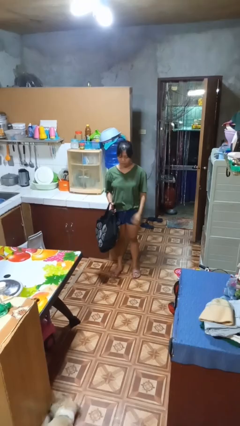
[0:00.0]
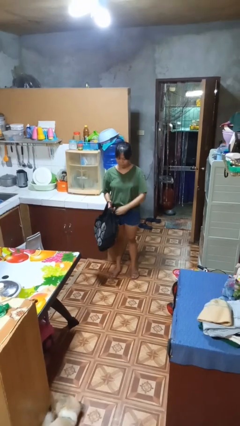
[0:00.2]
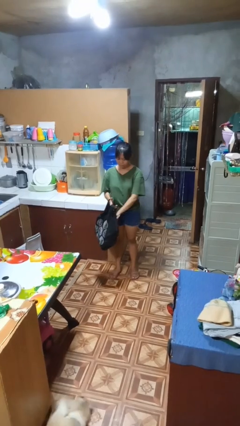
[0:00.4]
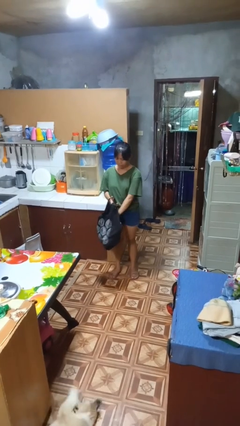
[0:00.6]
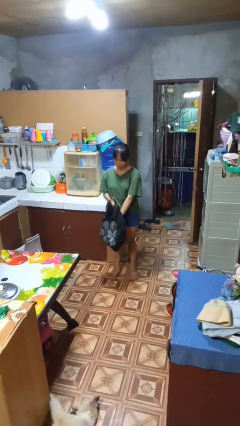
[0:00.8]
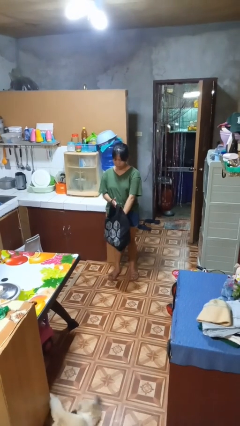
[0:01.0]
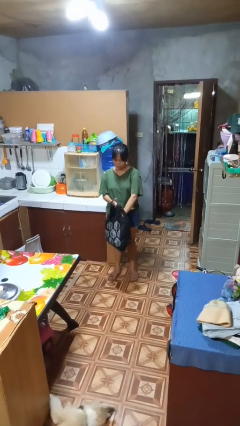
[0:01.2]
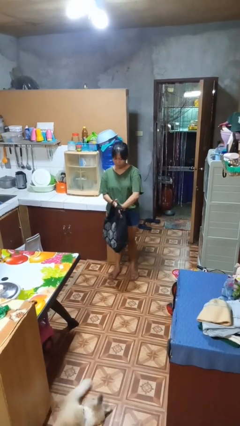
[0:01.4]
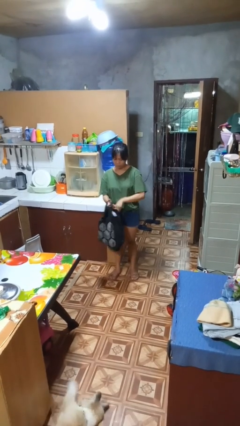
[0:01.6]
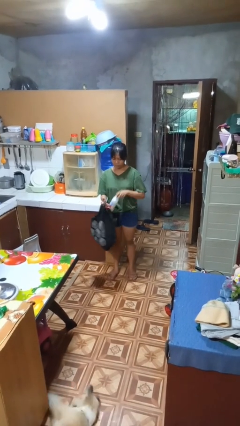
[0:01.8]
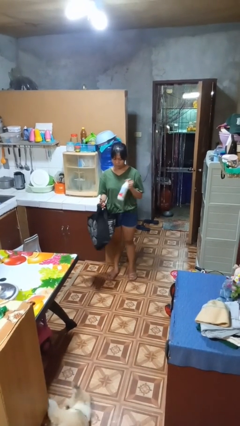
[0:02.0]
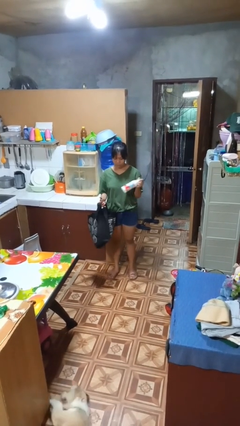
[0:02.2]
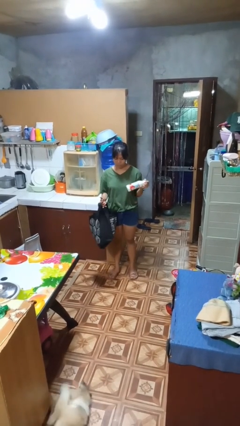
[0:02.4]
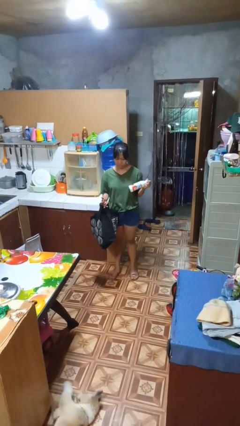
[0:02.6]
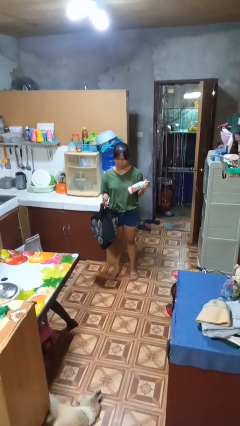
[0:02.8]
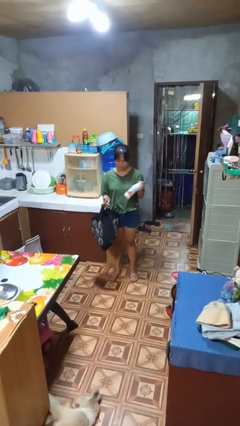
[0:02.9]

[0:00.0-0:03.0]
person takes object from bag

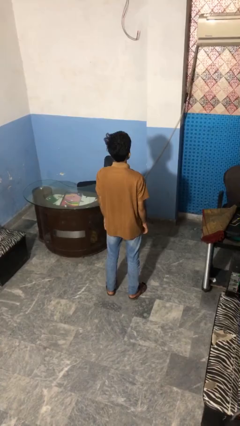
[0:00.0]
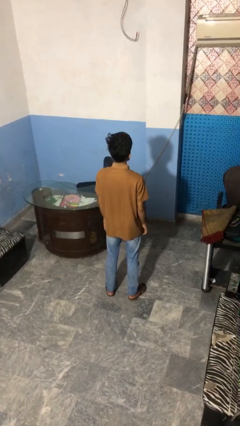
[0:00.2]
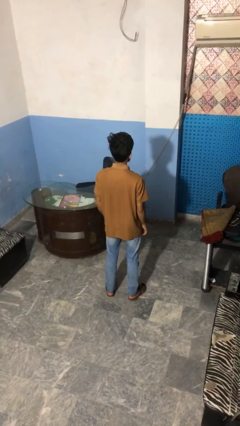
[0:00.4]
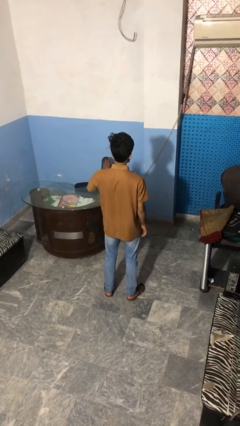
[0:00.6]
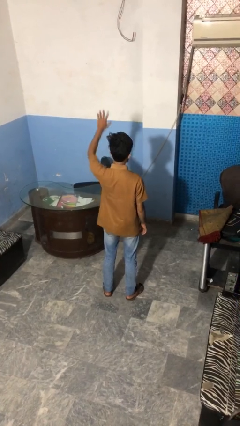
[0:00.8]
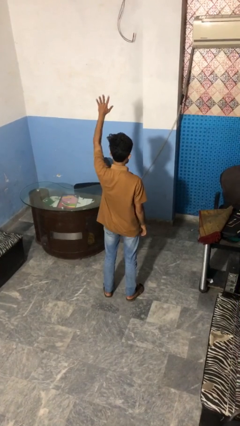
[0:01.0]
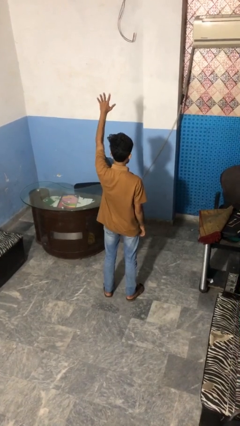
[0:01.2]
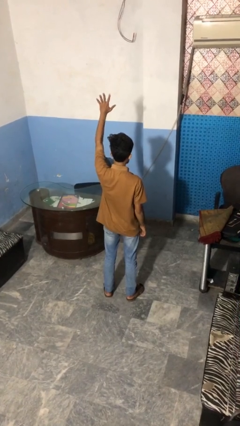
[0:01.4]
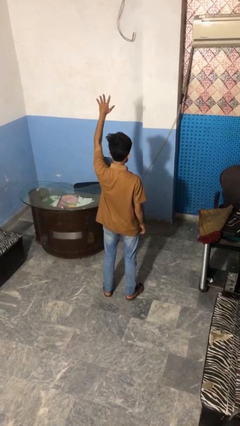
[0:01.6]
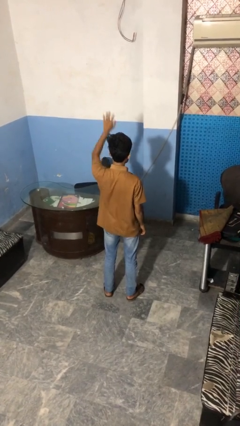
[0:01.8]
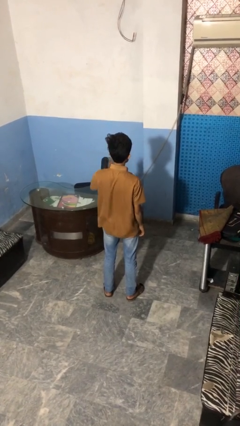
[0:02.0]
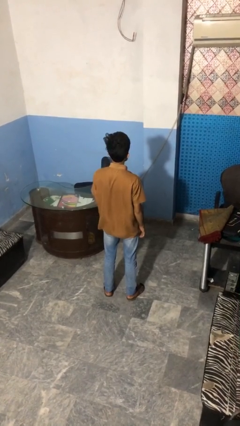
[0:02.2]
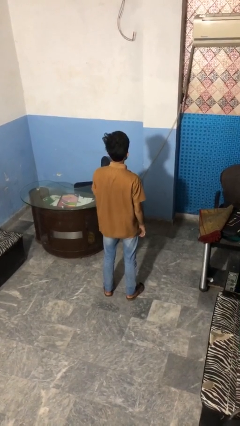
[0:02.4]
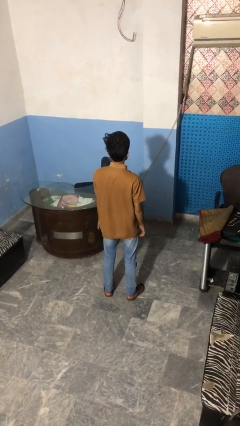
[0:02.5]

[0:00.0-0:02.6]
person gestures number five

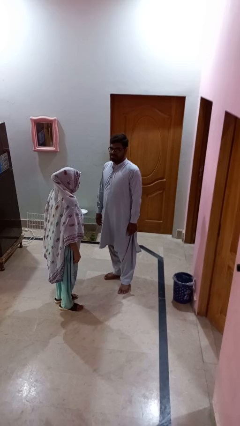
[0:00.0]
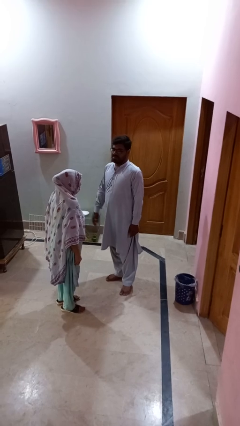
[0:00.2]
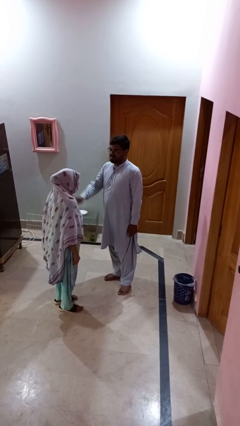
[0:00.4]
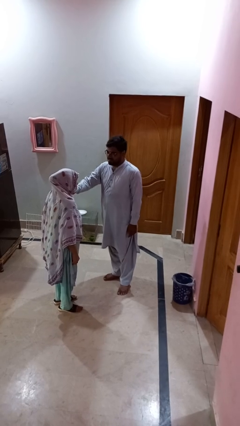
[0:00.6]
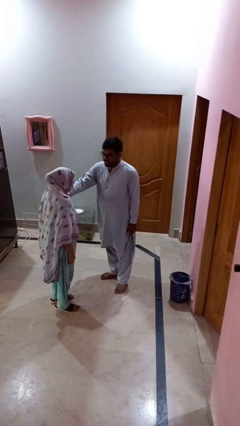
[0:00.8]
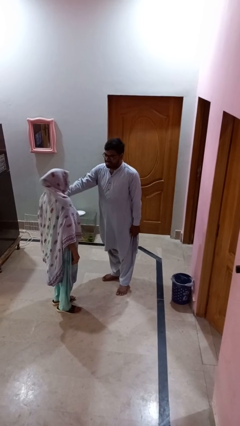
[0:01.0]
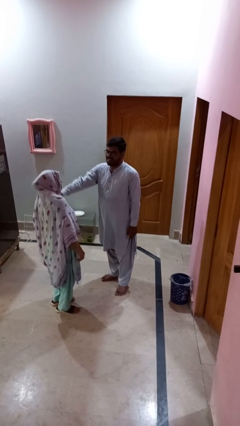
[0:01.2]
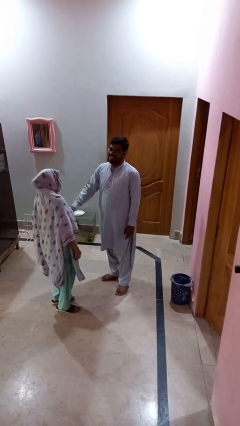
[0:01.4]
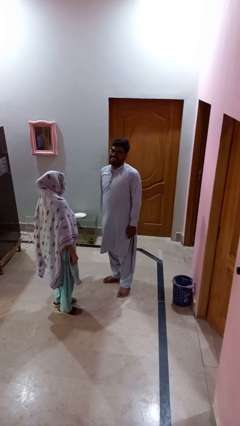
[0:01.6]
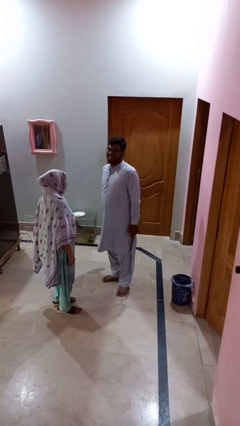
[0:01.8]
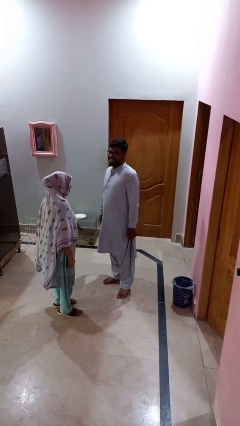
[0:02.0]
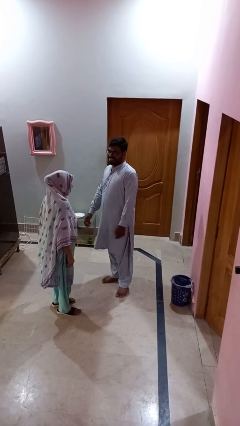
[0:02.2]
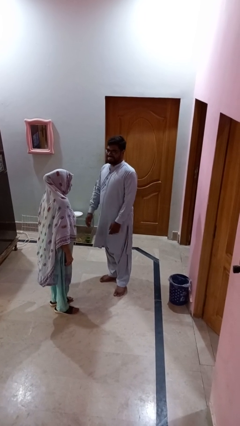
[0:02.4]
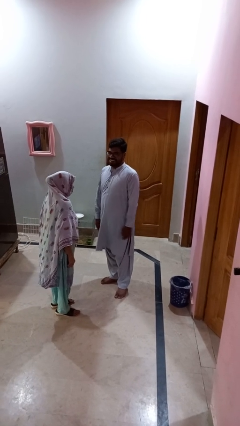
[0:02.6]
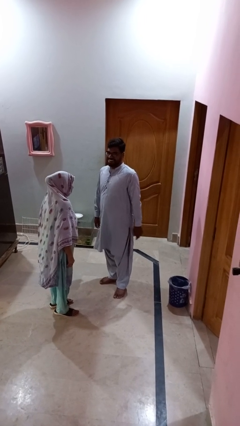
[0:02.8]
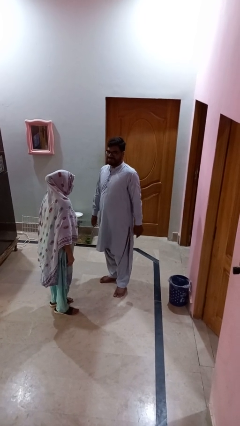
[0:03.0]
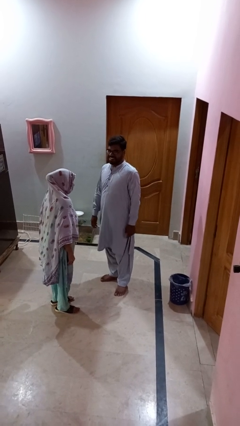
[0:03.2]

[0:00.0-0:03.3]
person shoves person

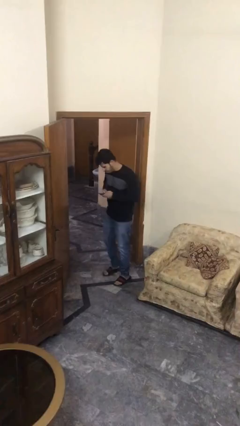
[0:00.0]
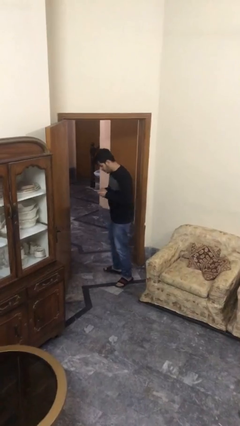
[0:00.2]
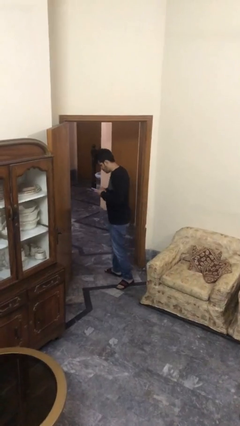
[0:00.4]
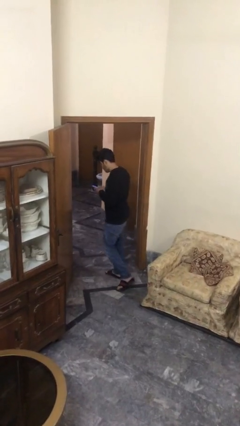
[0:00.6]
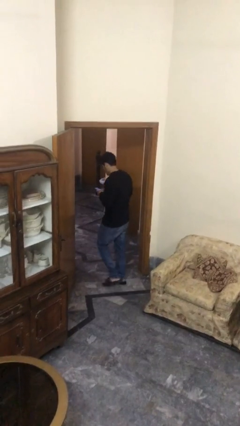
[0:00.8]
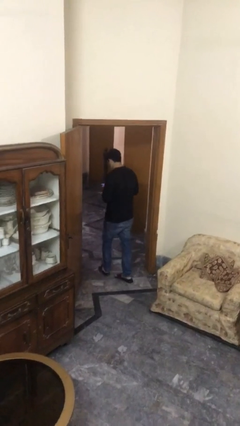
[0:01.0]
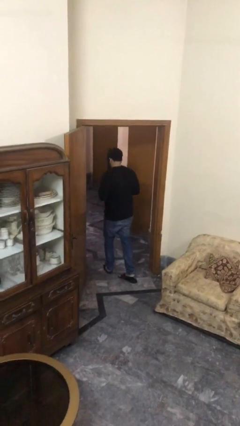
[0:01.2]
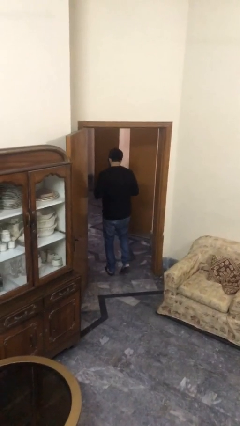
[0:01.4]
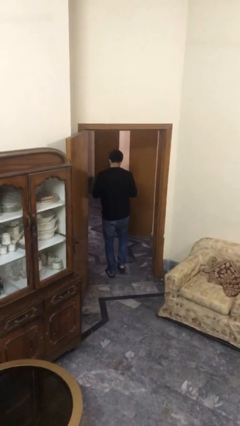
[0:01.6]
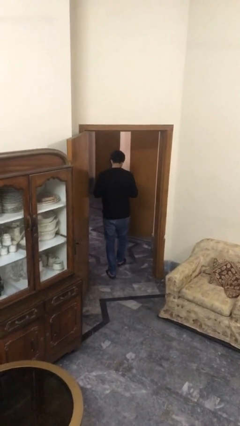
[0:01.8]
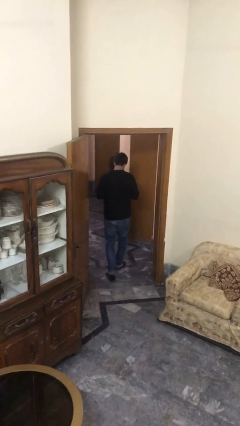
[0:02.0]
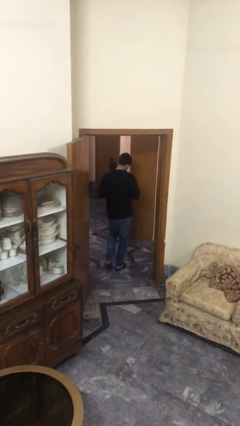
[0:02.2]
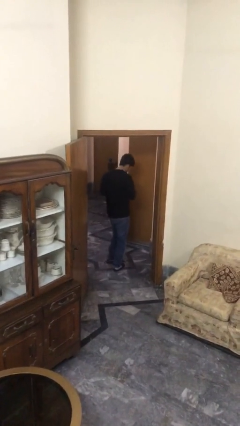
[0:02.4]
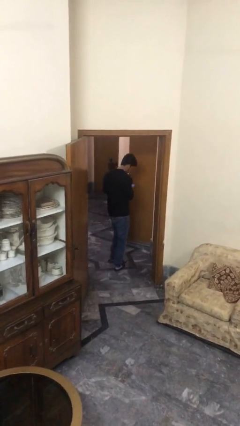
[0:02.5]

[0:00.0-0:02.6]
person exits scene through structure

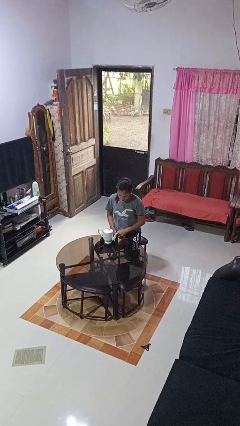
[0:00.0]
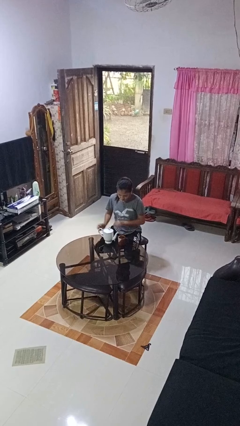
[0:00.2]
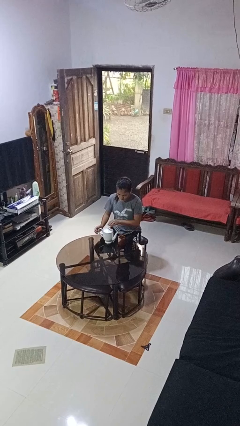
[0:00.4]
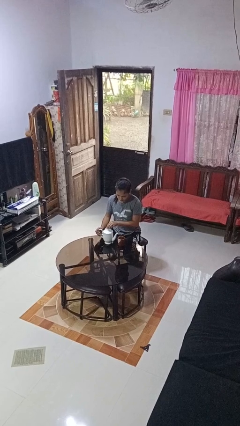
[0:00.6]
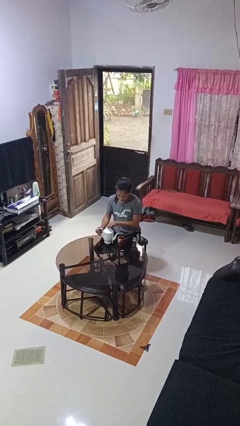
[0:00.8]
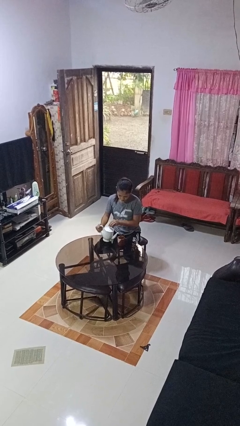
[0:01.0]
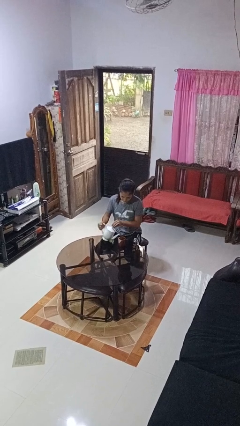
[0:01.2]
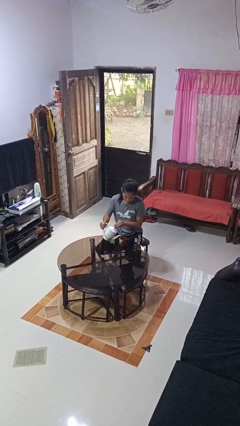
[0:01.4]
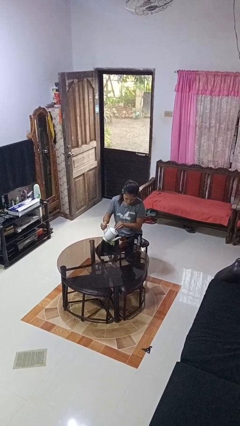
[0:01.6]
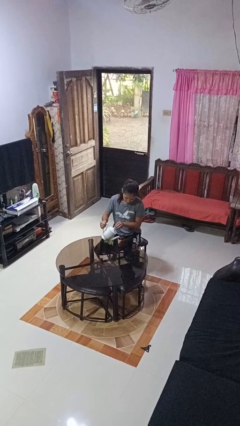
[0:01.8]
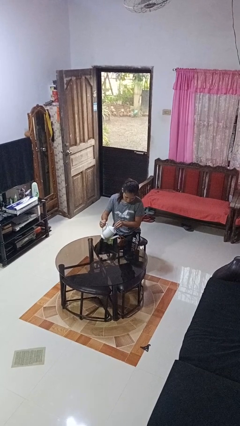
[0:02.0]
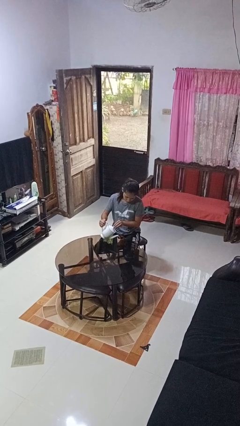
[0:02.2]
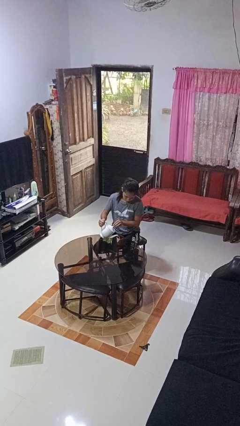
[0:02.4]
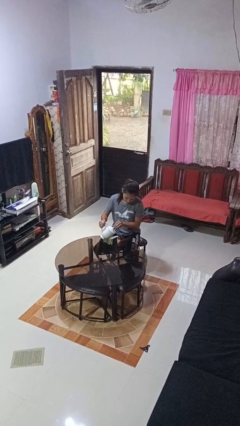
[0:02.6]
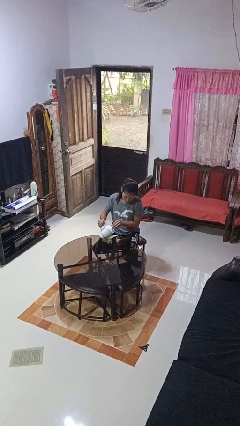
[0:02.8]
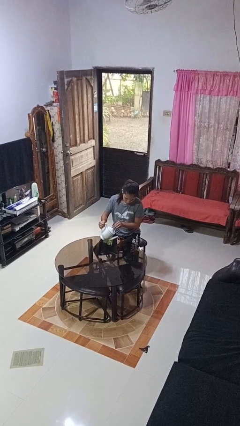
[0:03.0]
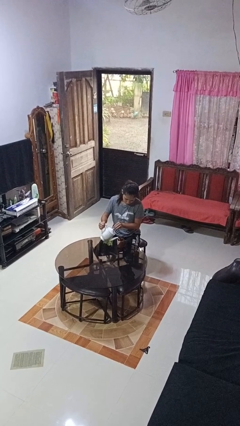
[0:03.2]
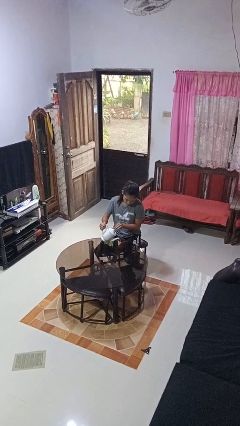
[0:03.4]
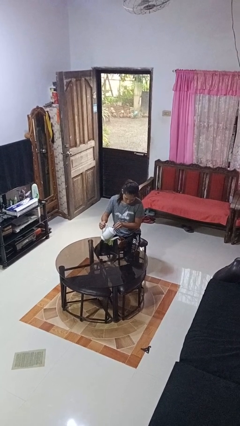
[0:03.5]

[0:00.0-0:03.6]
person pours coffee into mug

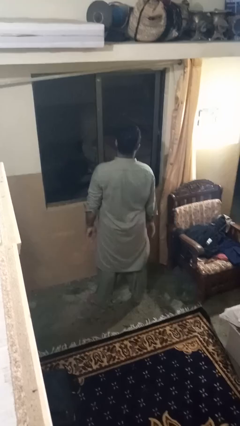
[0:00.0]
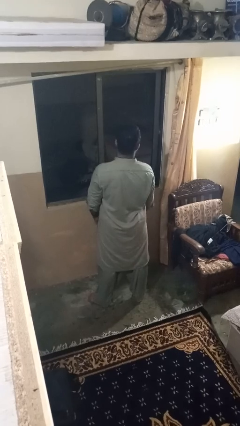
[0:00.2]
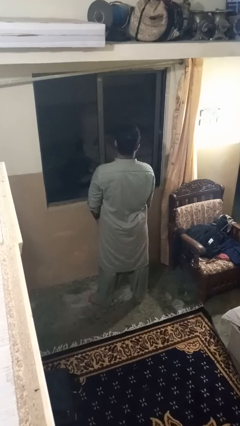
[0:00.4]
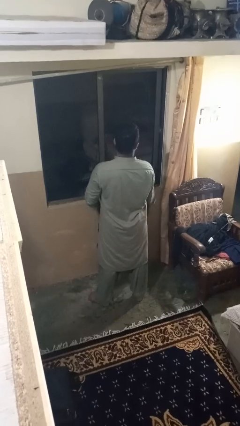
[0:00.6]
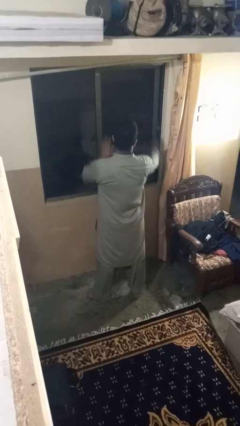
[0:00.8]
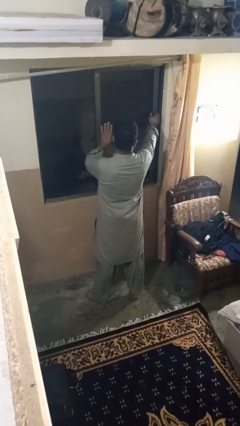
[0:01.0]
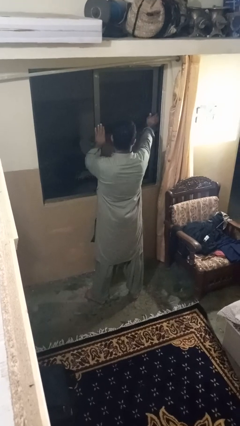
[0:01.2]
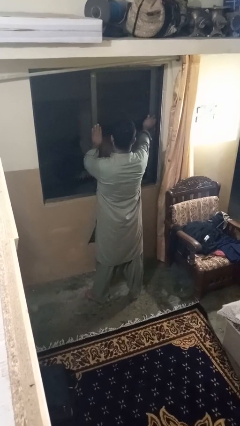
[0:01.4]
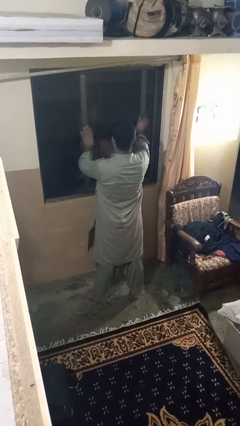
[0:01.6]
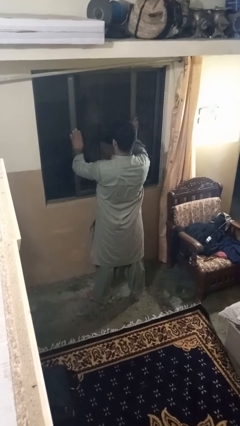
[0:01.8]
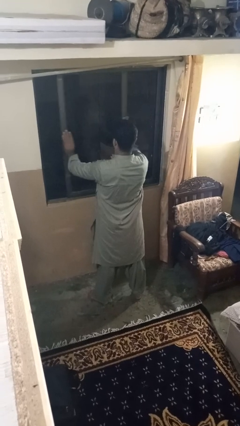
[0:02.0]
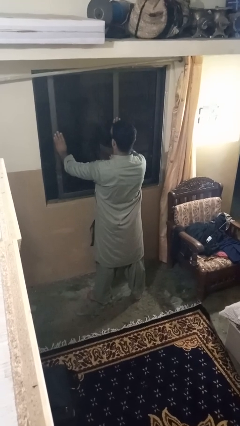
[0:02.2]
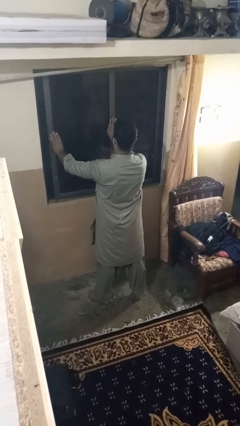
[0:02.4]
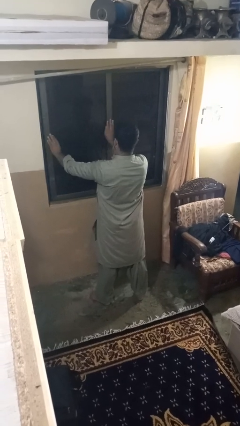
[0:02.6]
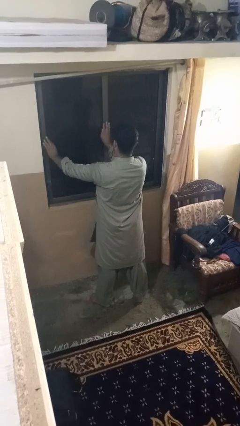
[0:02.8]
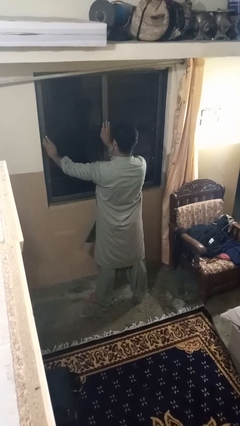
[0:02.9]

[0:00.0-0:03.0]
person closes home window
